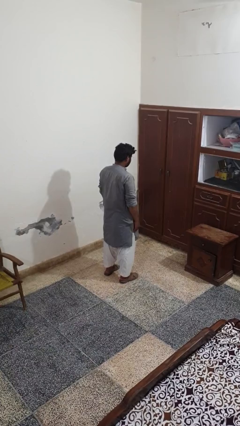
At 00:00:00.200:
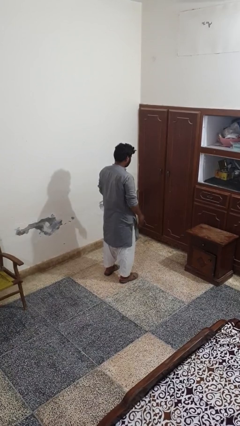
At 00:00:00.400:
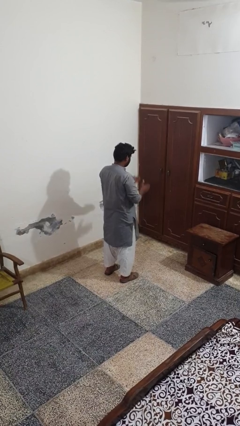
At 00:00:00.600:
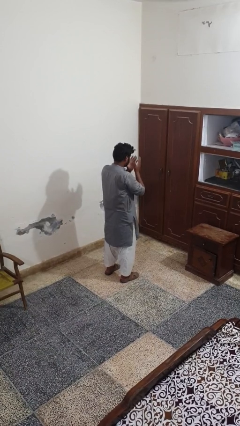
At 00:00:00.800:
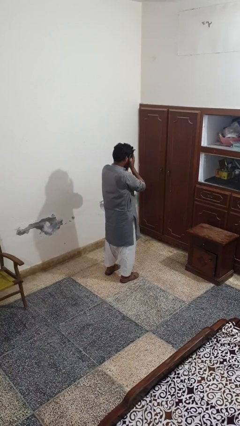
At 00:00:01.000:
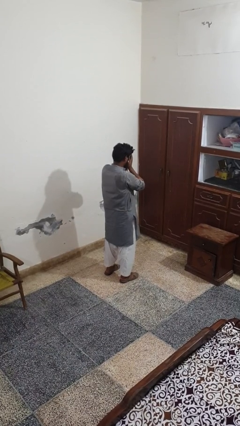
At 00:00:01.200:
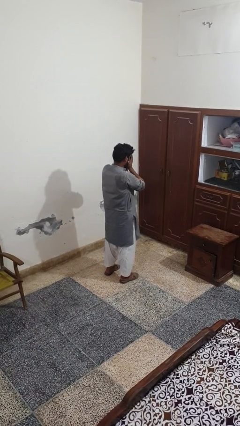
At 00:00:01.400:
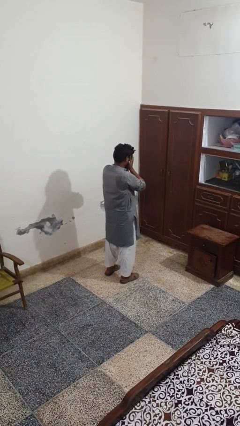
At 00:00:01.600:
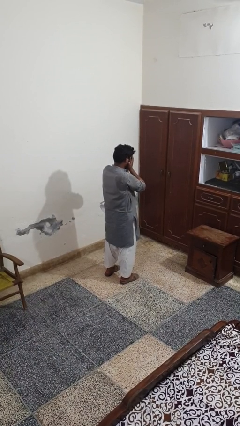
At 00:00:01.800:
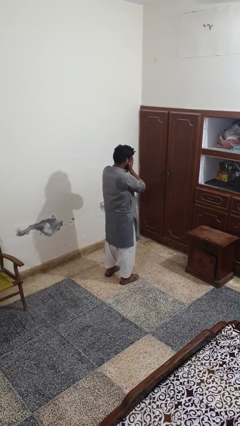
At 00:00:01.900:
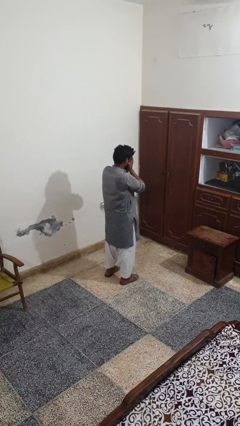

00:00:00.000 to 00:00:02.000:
person covers face with hands

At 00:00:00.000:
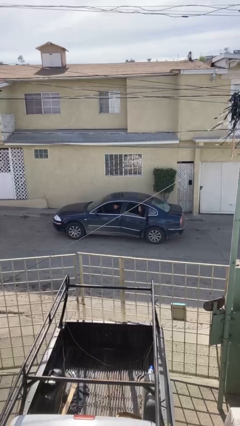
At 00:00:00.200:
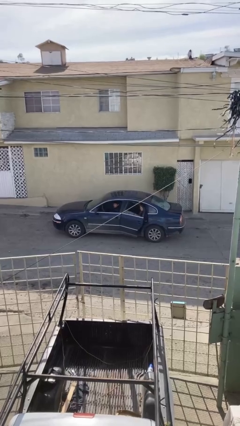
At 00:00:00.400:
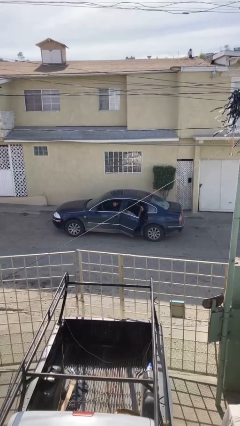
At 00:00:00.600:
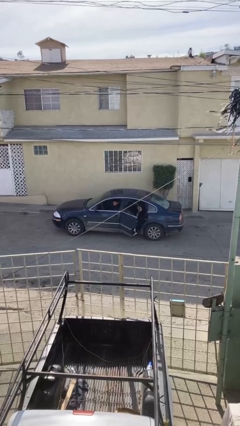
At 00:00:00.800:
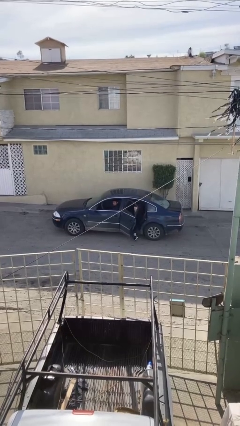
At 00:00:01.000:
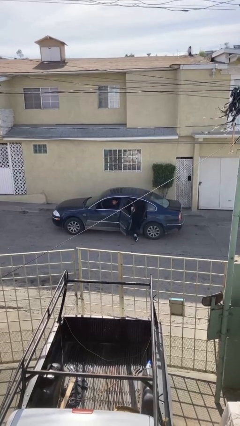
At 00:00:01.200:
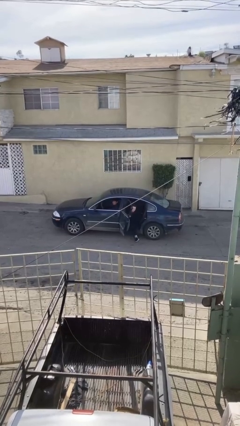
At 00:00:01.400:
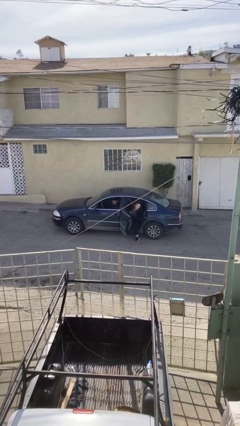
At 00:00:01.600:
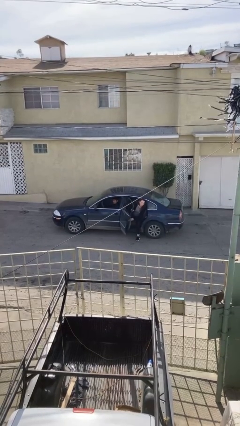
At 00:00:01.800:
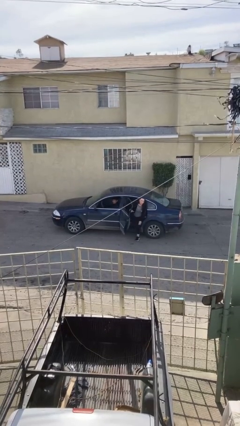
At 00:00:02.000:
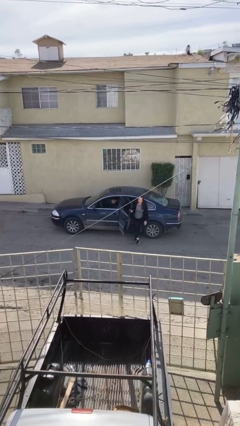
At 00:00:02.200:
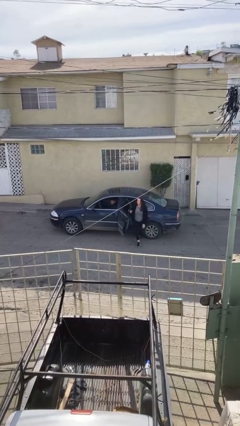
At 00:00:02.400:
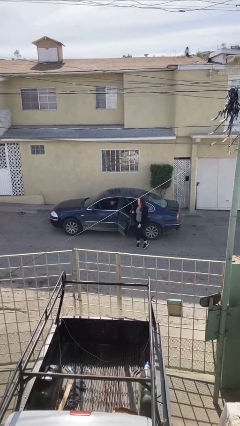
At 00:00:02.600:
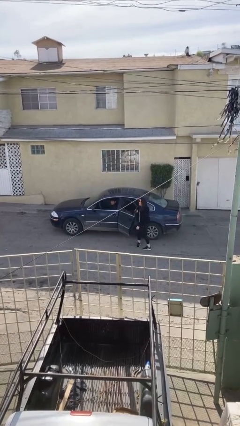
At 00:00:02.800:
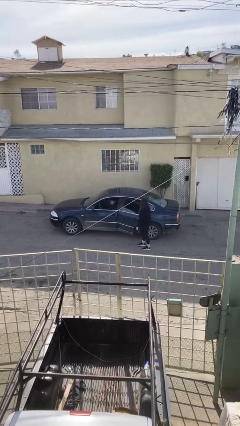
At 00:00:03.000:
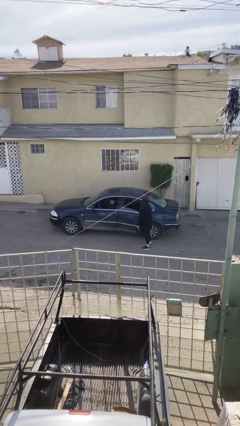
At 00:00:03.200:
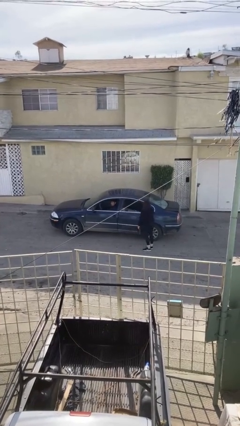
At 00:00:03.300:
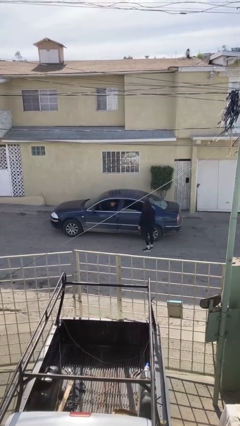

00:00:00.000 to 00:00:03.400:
car drops off person

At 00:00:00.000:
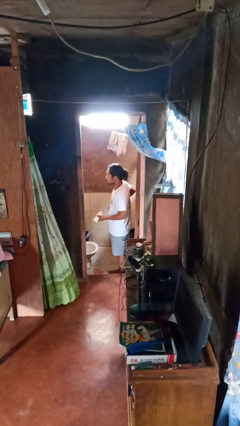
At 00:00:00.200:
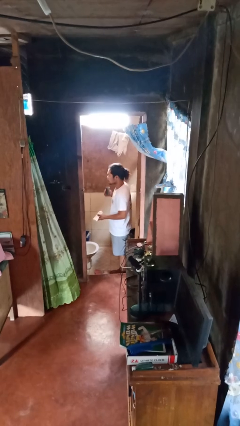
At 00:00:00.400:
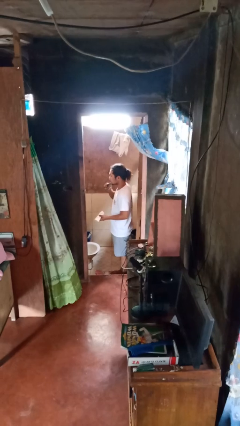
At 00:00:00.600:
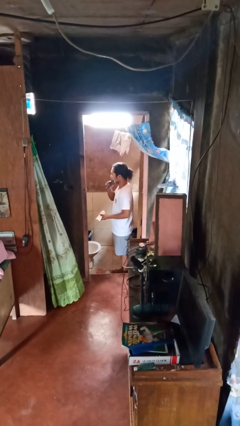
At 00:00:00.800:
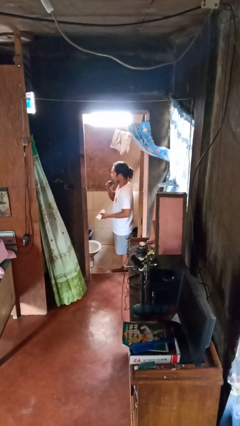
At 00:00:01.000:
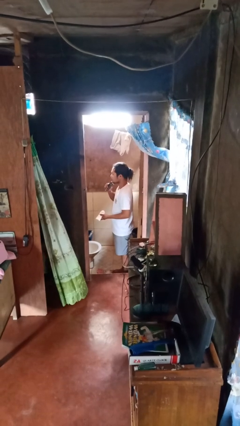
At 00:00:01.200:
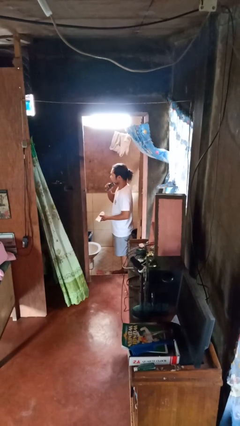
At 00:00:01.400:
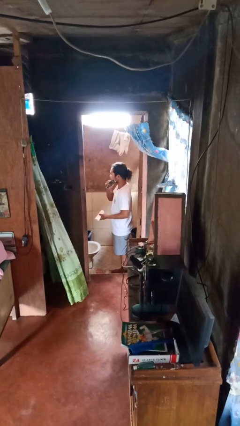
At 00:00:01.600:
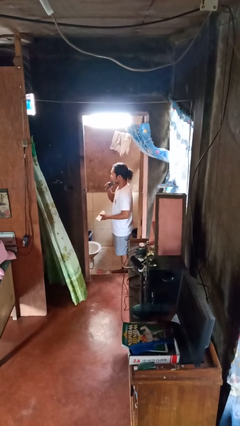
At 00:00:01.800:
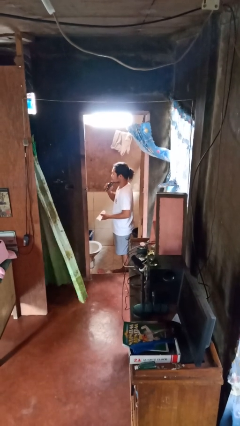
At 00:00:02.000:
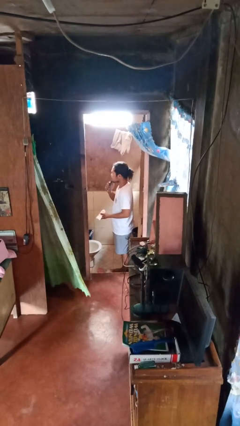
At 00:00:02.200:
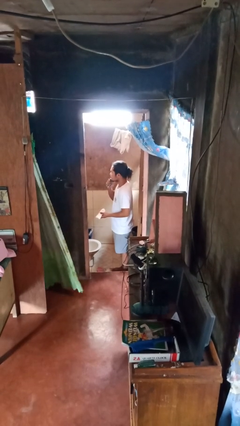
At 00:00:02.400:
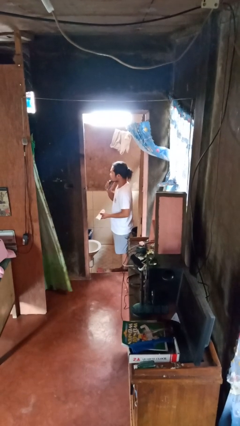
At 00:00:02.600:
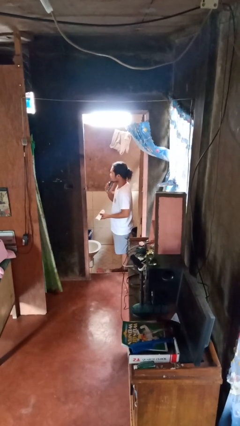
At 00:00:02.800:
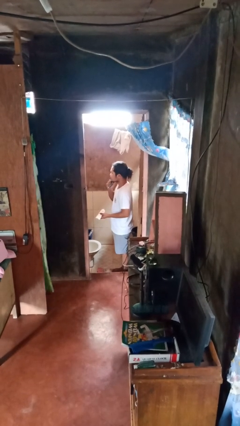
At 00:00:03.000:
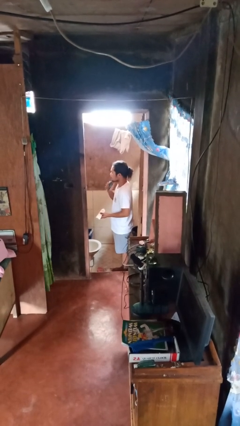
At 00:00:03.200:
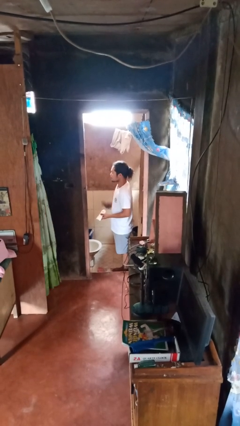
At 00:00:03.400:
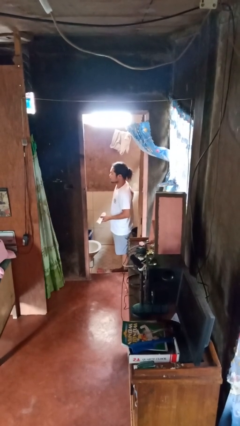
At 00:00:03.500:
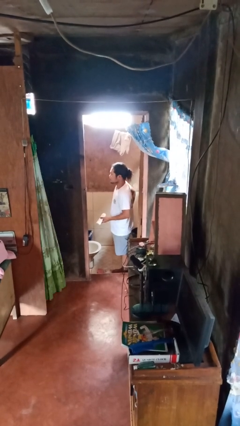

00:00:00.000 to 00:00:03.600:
person shaves face

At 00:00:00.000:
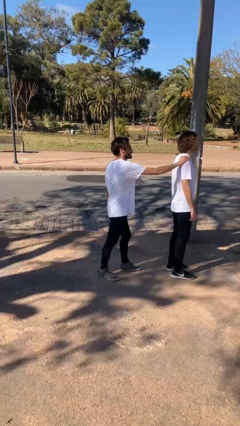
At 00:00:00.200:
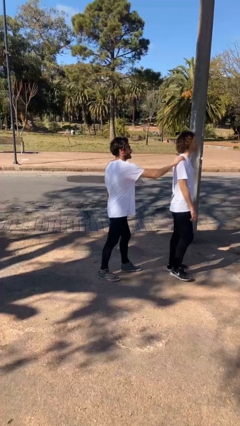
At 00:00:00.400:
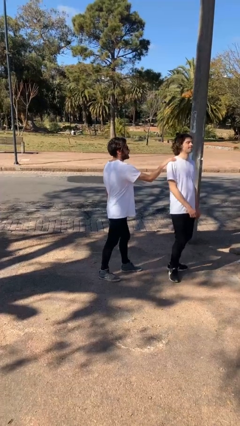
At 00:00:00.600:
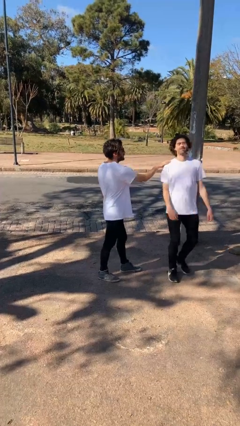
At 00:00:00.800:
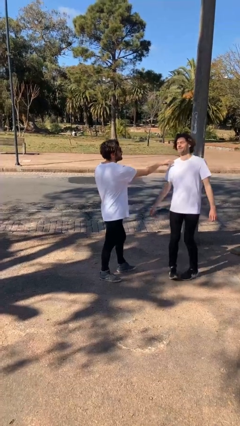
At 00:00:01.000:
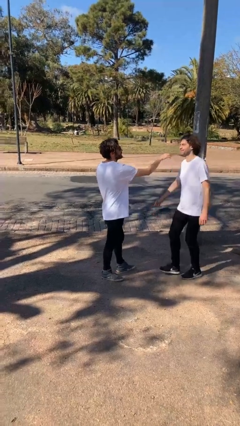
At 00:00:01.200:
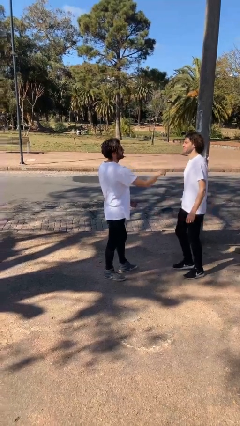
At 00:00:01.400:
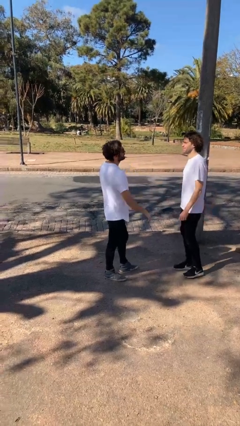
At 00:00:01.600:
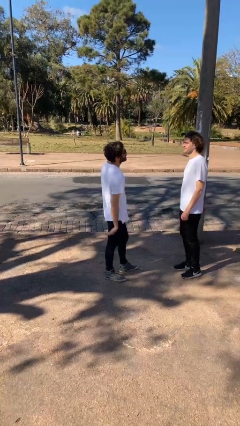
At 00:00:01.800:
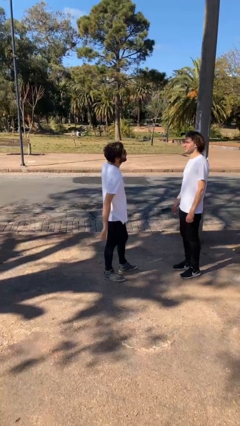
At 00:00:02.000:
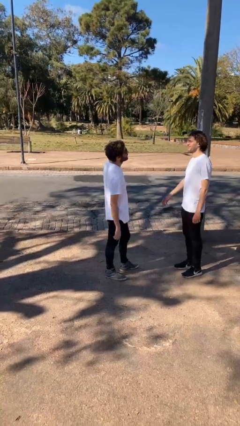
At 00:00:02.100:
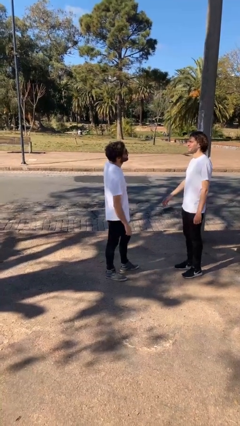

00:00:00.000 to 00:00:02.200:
person spins person around

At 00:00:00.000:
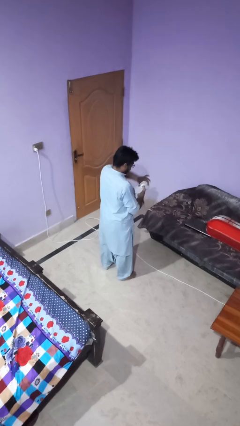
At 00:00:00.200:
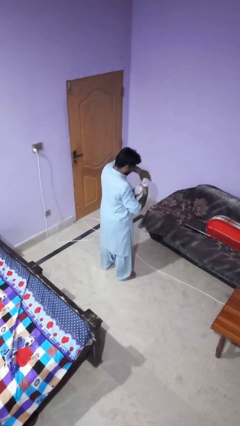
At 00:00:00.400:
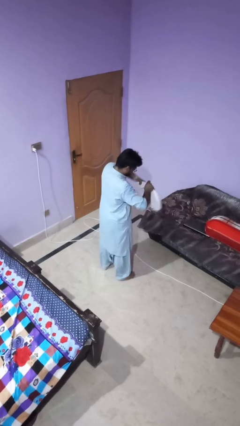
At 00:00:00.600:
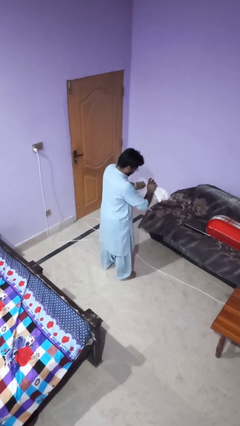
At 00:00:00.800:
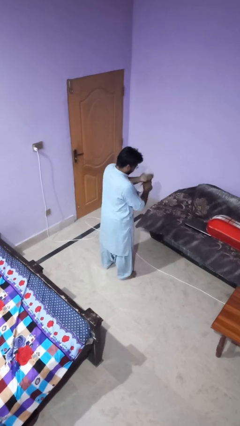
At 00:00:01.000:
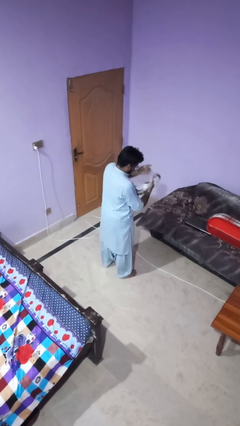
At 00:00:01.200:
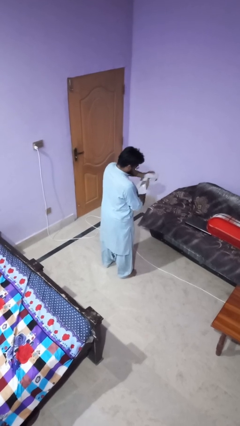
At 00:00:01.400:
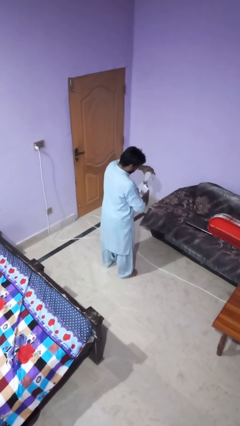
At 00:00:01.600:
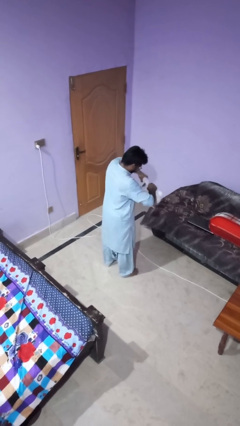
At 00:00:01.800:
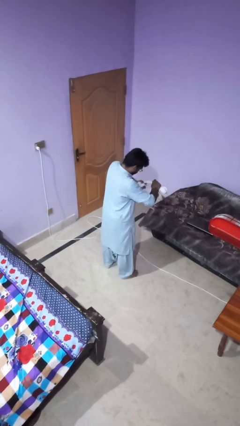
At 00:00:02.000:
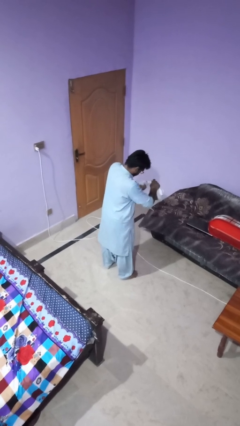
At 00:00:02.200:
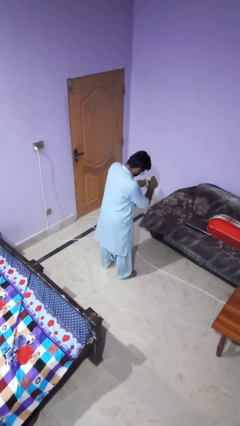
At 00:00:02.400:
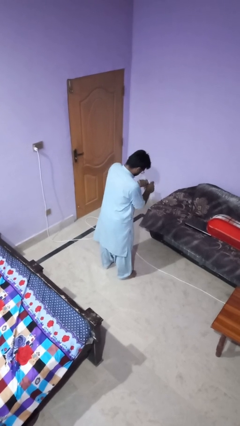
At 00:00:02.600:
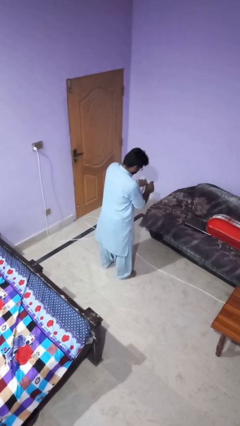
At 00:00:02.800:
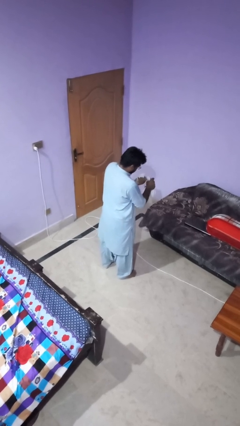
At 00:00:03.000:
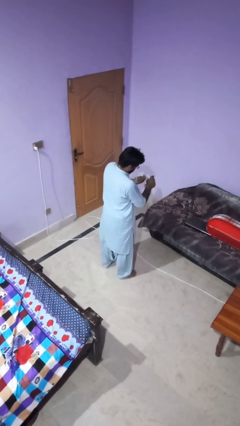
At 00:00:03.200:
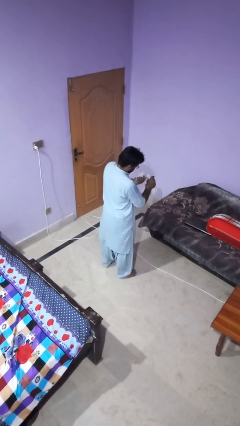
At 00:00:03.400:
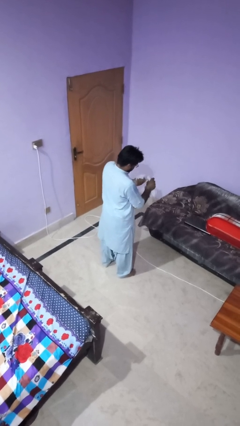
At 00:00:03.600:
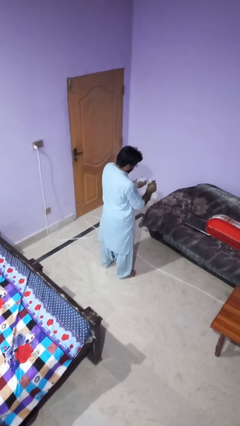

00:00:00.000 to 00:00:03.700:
person squeezes object

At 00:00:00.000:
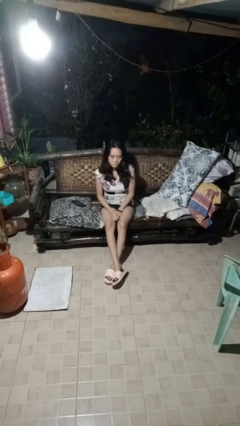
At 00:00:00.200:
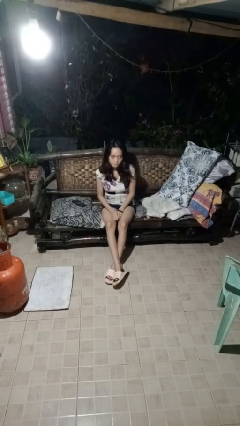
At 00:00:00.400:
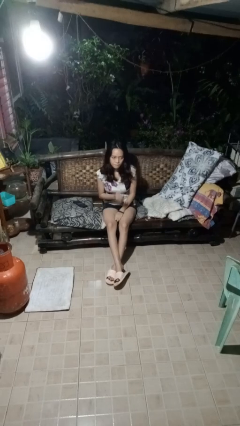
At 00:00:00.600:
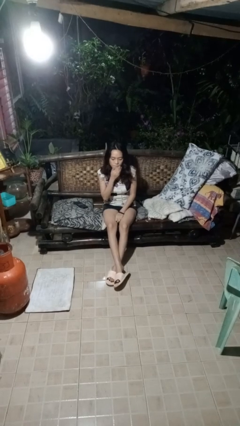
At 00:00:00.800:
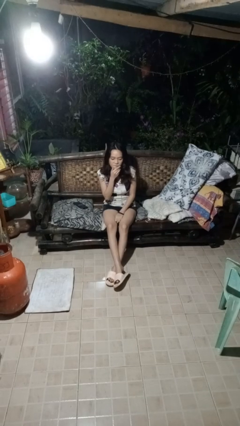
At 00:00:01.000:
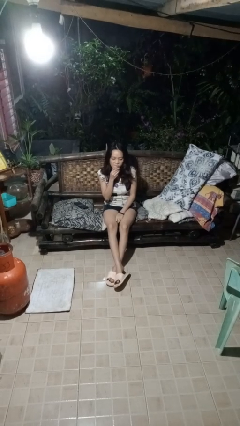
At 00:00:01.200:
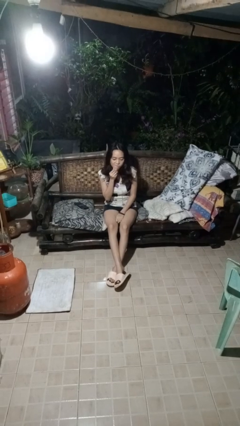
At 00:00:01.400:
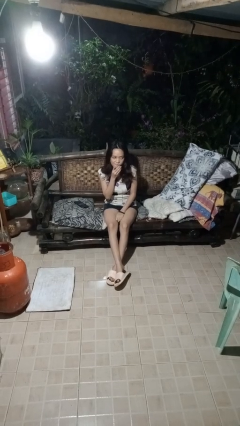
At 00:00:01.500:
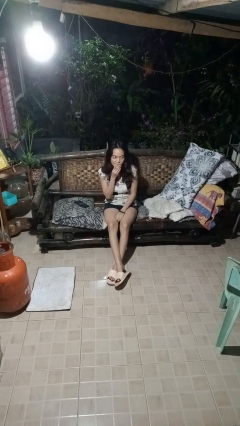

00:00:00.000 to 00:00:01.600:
person strokes chin

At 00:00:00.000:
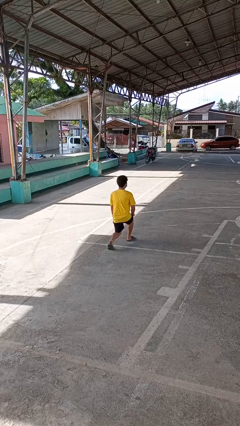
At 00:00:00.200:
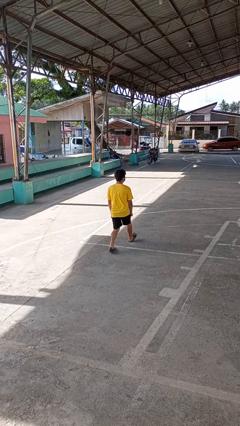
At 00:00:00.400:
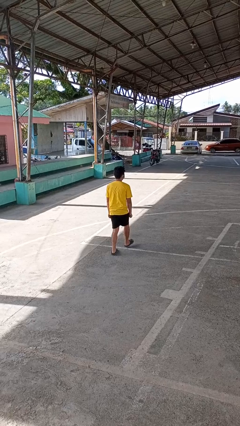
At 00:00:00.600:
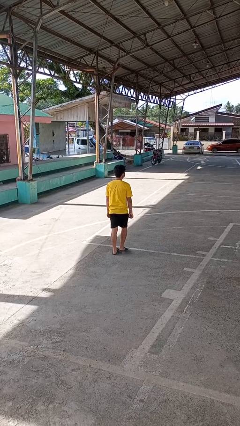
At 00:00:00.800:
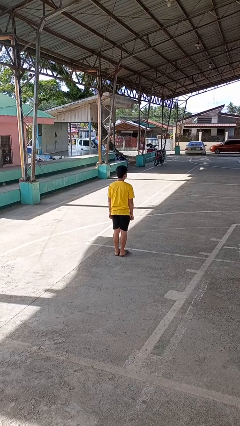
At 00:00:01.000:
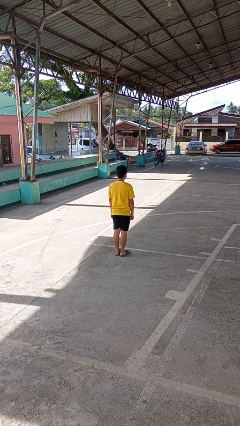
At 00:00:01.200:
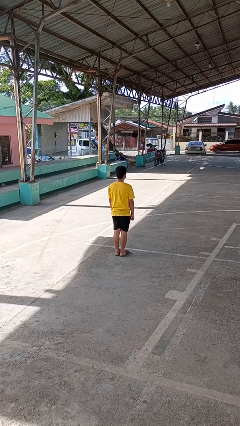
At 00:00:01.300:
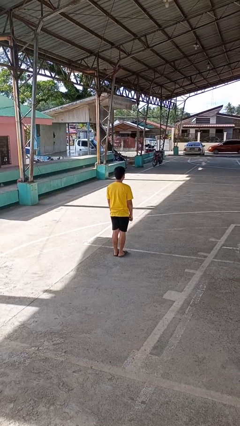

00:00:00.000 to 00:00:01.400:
person stands up from floor
